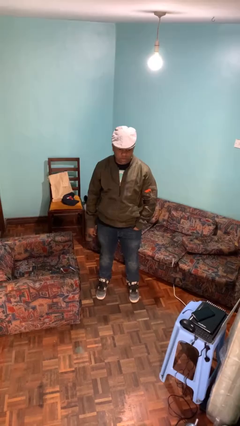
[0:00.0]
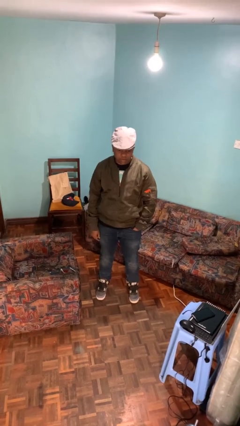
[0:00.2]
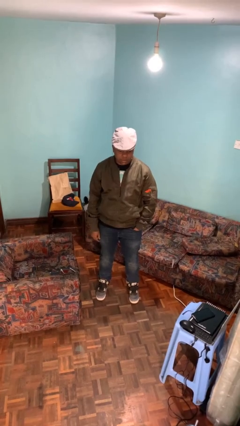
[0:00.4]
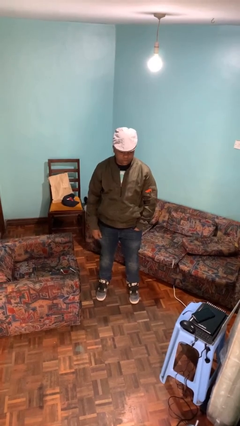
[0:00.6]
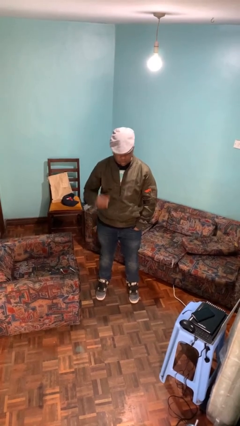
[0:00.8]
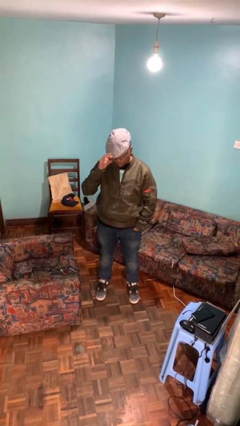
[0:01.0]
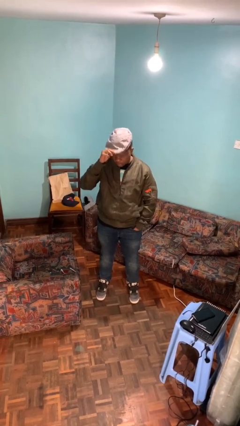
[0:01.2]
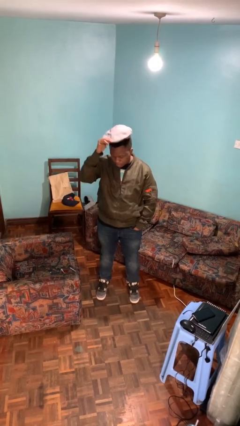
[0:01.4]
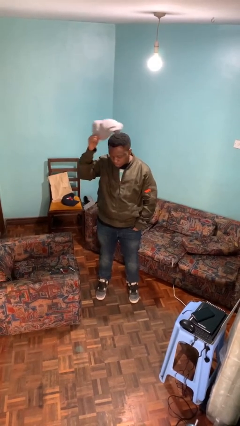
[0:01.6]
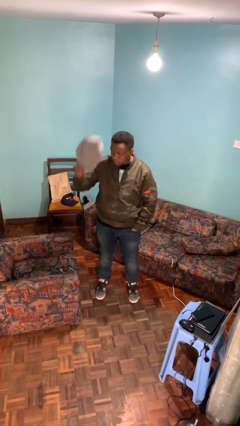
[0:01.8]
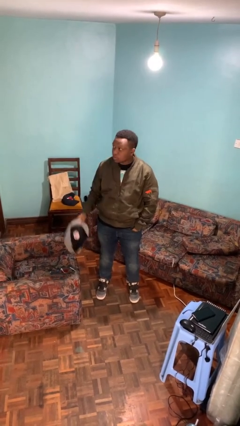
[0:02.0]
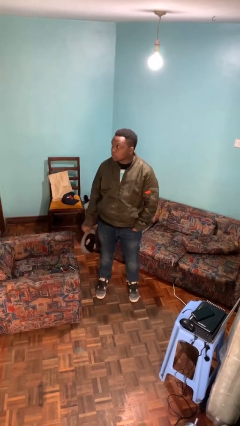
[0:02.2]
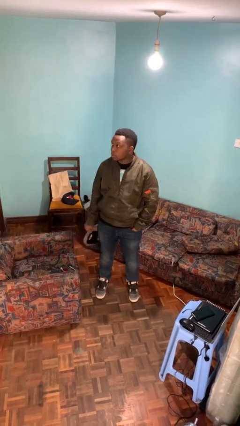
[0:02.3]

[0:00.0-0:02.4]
person takes off hat

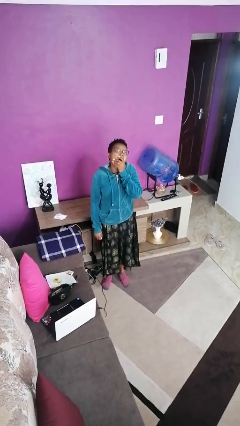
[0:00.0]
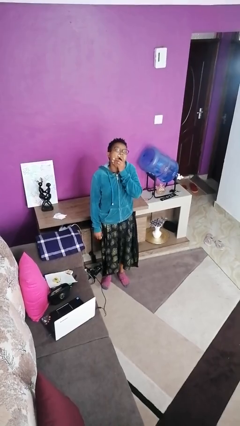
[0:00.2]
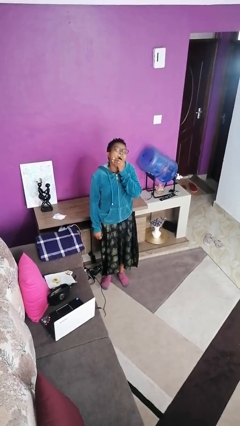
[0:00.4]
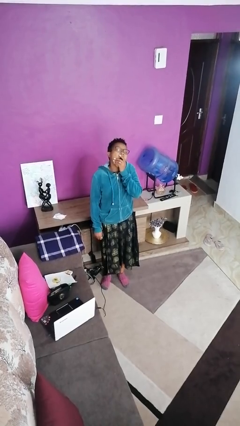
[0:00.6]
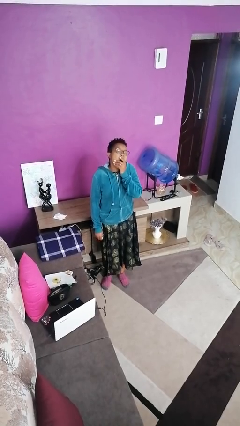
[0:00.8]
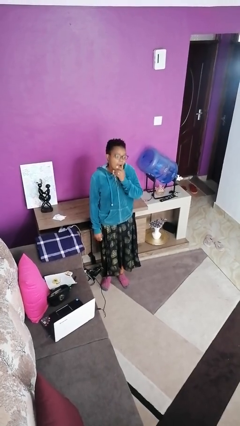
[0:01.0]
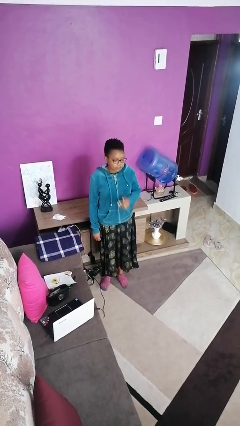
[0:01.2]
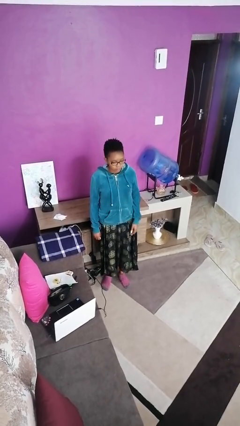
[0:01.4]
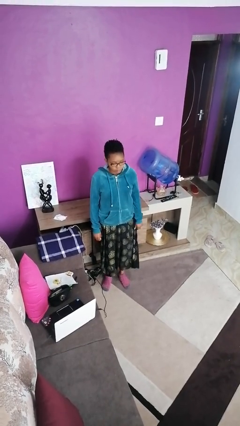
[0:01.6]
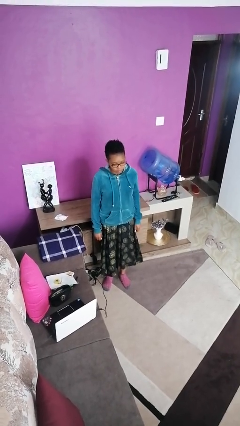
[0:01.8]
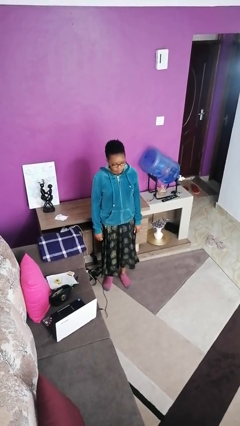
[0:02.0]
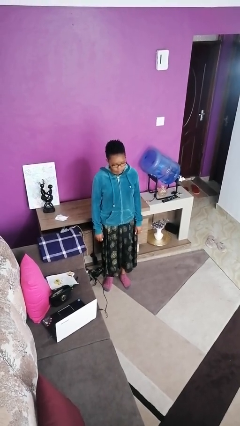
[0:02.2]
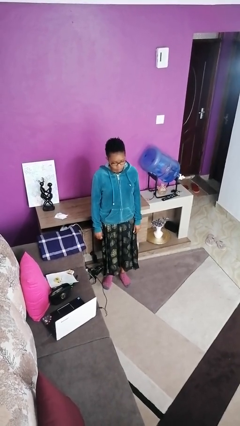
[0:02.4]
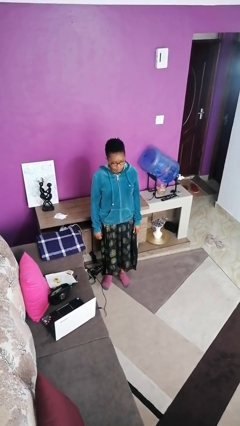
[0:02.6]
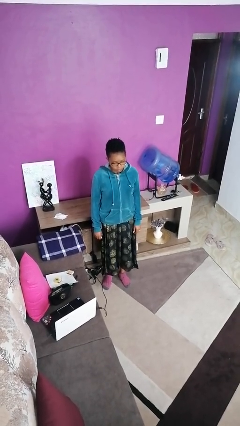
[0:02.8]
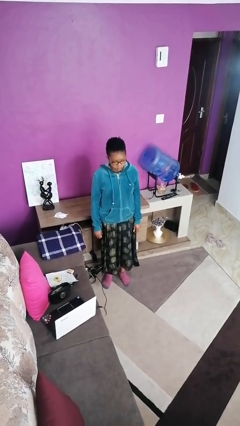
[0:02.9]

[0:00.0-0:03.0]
person opens cabinet

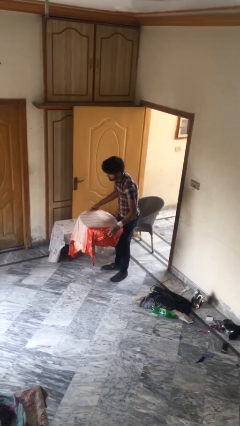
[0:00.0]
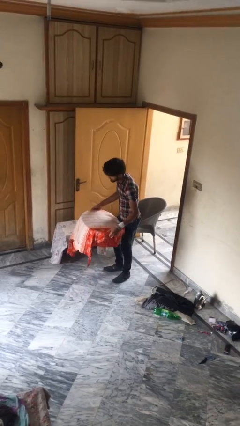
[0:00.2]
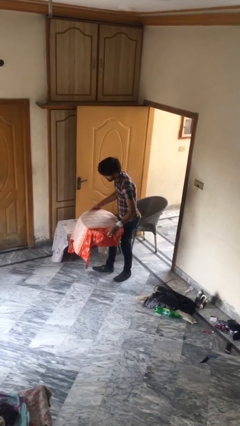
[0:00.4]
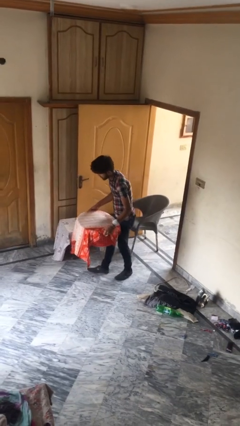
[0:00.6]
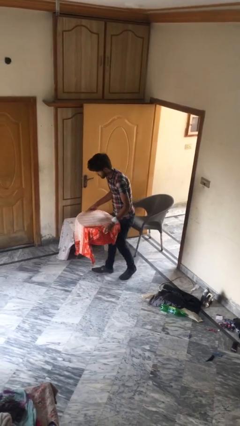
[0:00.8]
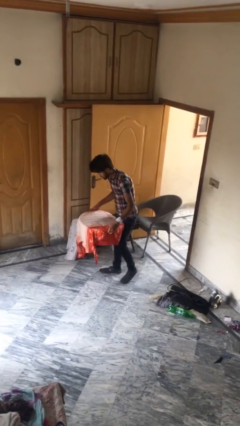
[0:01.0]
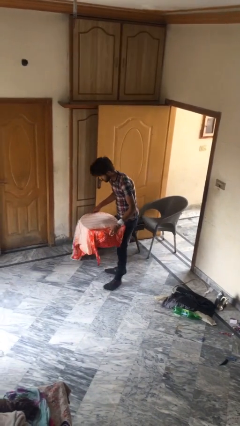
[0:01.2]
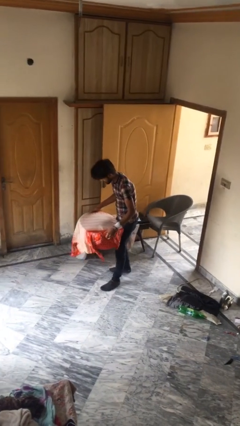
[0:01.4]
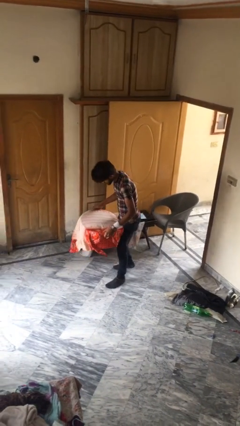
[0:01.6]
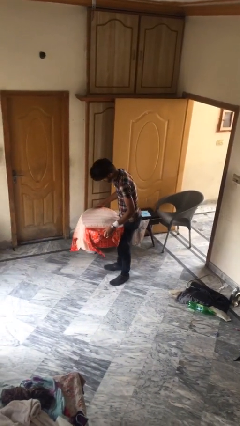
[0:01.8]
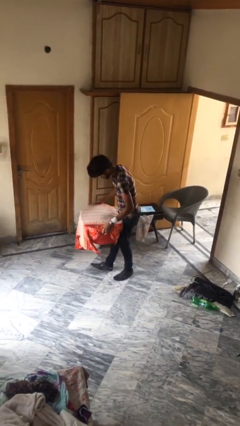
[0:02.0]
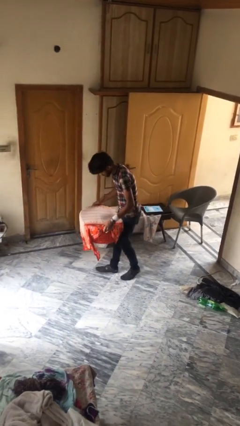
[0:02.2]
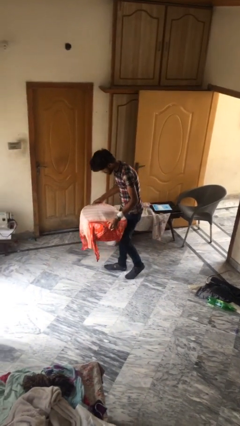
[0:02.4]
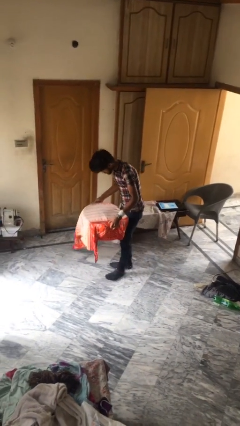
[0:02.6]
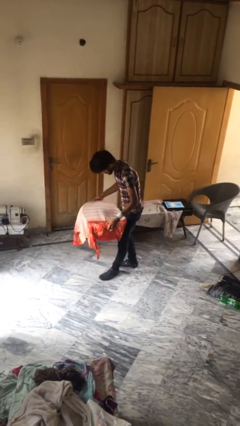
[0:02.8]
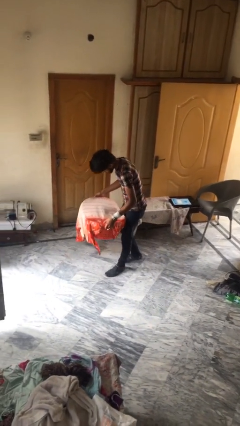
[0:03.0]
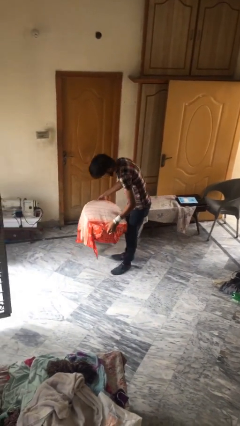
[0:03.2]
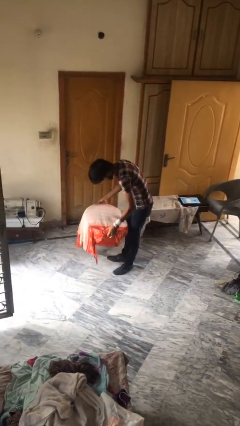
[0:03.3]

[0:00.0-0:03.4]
person carries heavy object

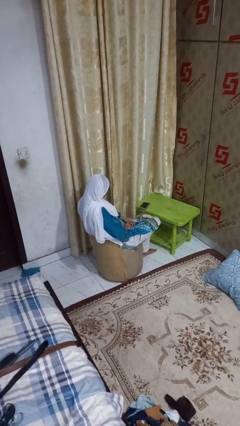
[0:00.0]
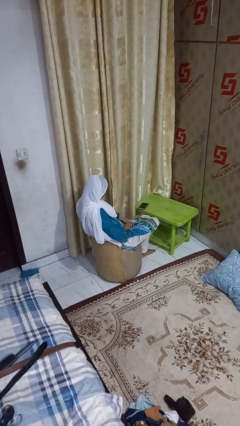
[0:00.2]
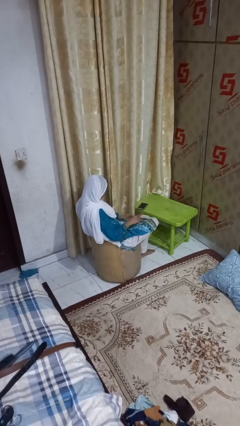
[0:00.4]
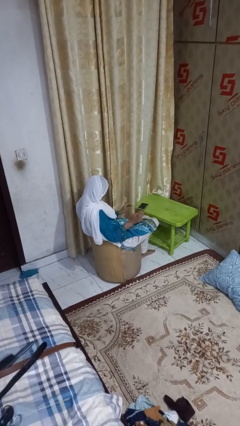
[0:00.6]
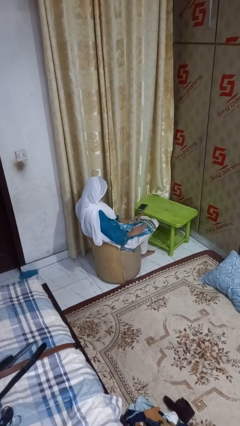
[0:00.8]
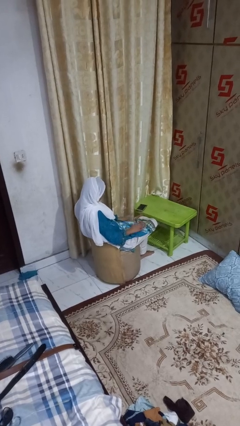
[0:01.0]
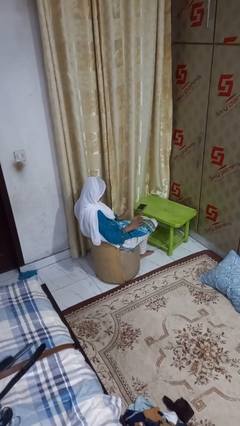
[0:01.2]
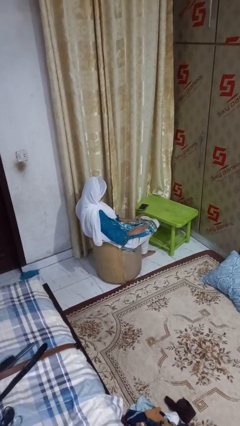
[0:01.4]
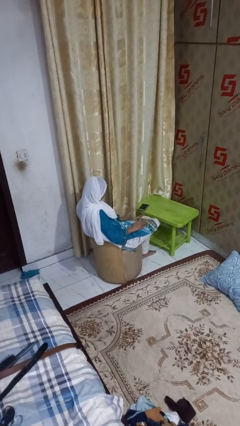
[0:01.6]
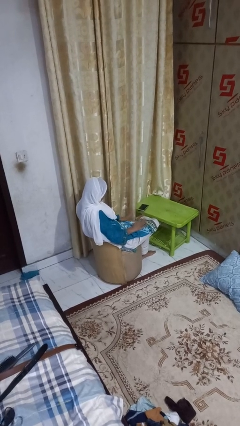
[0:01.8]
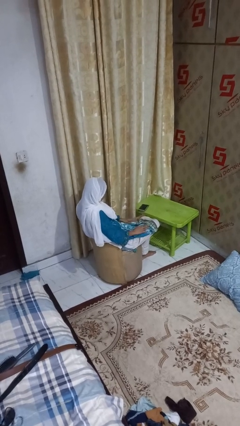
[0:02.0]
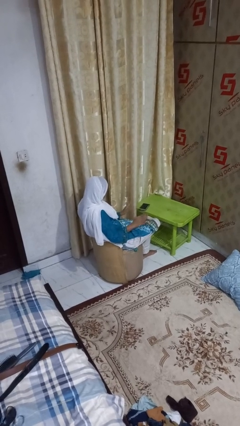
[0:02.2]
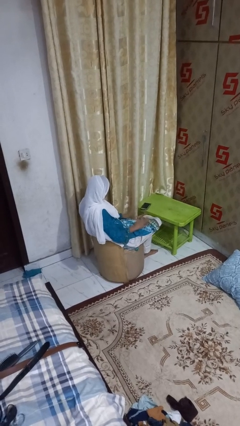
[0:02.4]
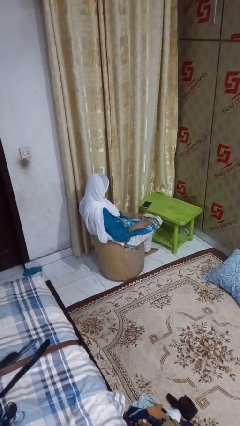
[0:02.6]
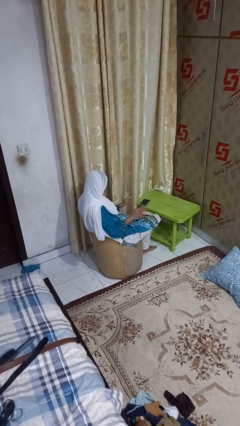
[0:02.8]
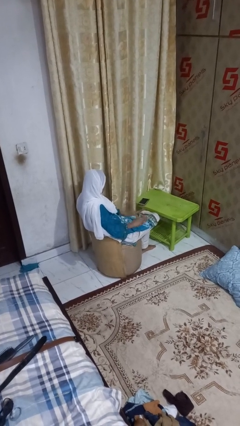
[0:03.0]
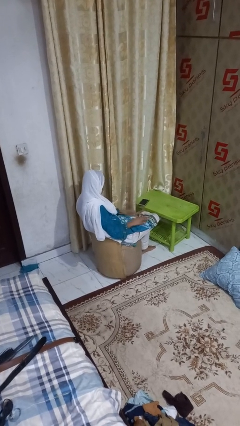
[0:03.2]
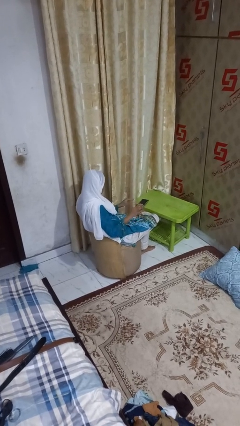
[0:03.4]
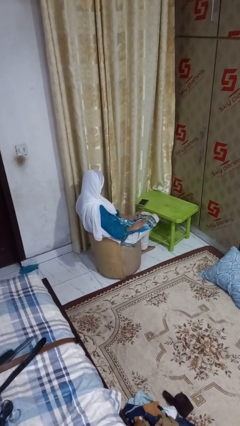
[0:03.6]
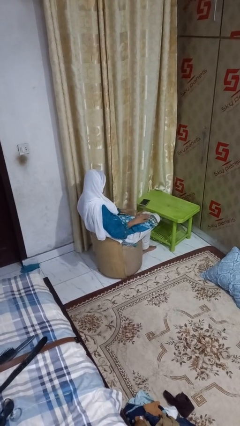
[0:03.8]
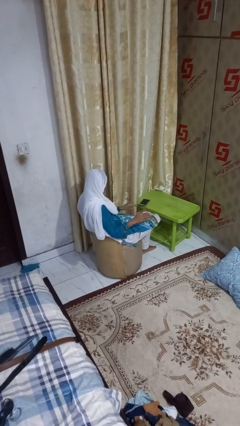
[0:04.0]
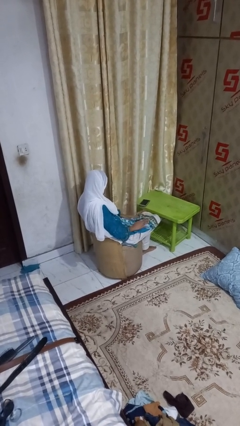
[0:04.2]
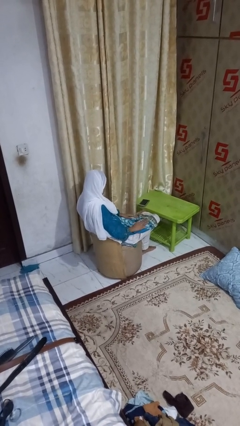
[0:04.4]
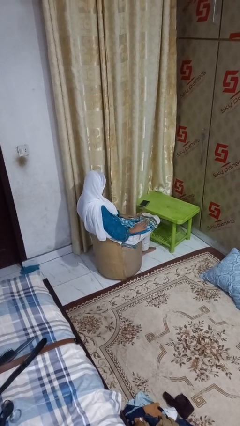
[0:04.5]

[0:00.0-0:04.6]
person slaps hands on thighs

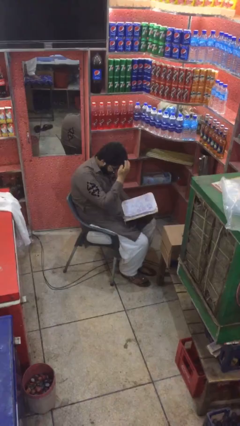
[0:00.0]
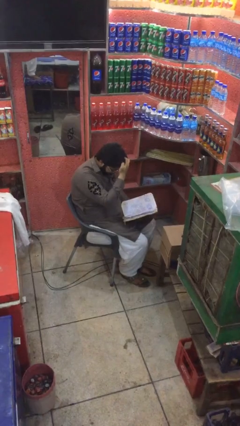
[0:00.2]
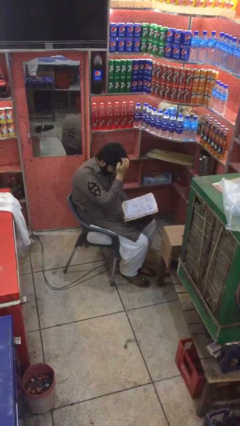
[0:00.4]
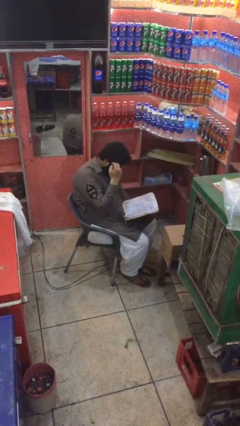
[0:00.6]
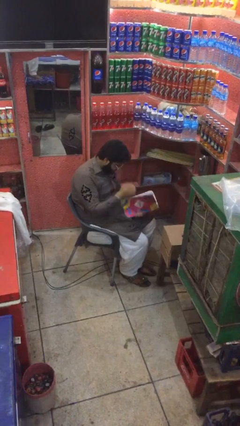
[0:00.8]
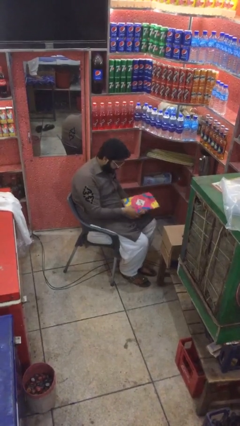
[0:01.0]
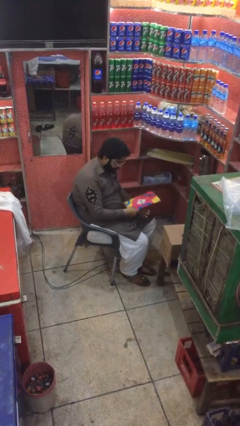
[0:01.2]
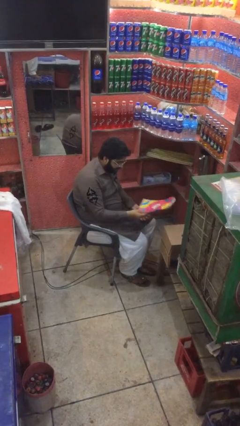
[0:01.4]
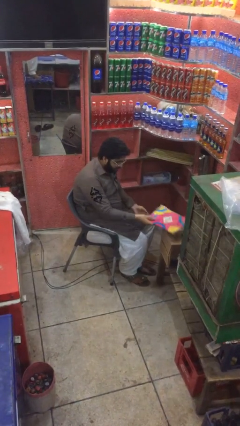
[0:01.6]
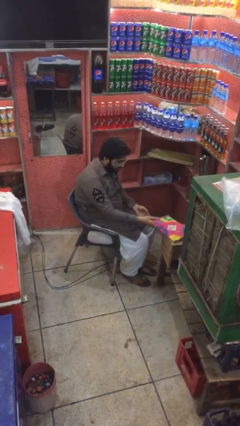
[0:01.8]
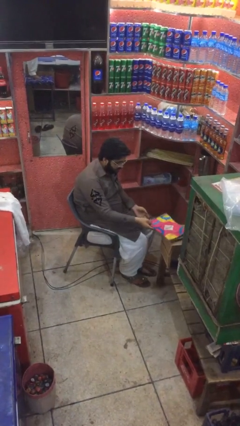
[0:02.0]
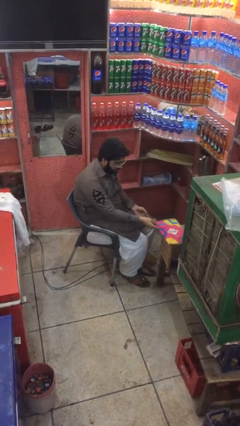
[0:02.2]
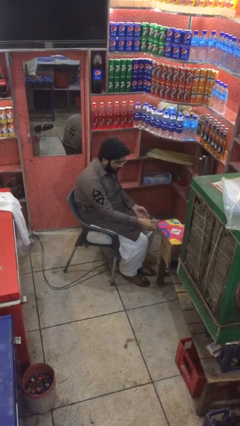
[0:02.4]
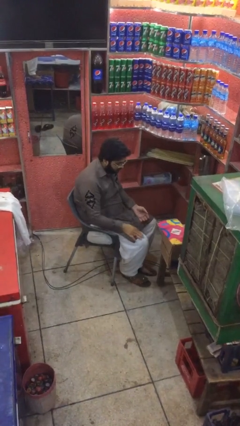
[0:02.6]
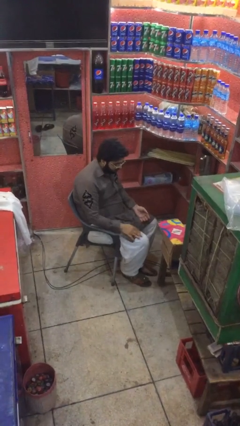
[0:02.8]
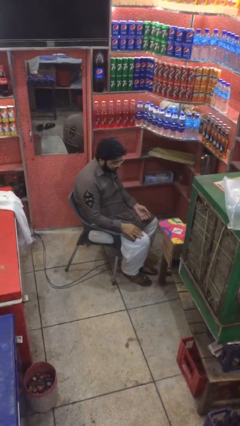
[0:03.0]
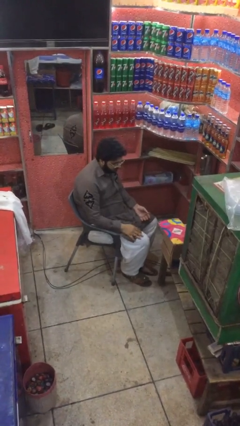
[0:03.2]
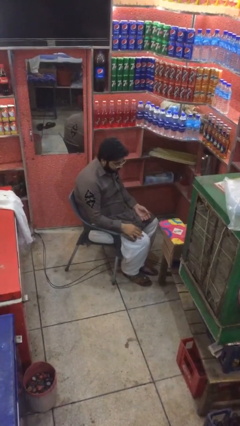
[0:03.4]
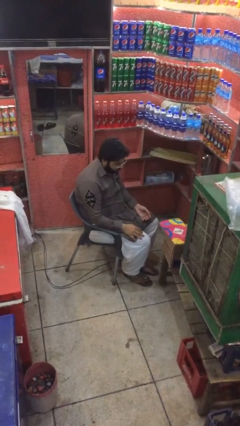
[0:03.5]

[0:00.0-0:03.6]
person puts down object on table

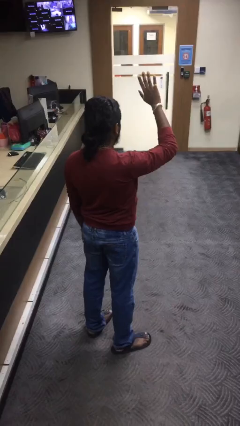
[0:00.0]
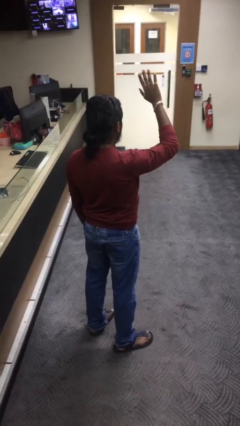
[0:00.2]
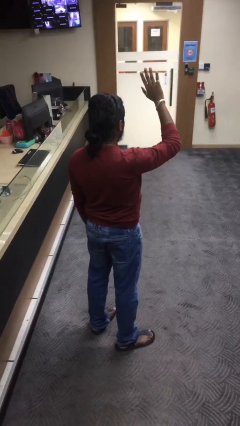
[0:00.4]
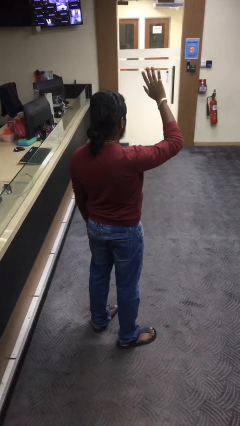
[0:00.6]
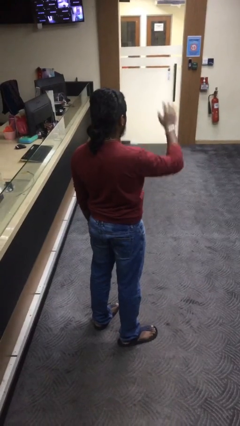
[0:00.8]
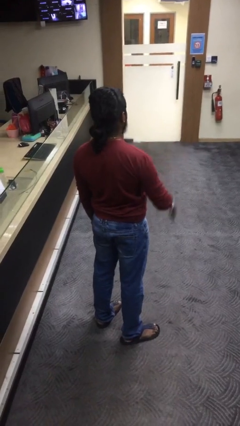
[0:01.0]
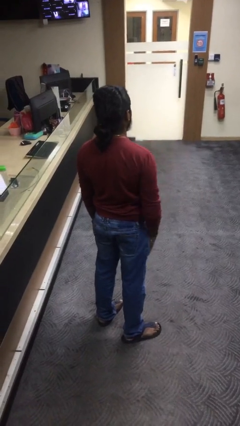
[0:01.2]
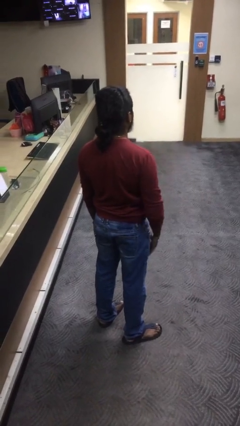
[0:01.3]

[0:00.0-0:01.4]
person gestures lower hand
